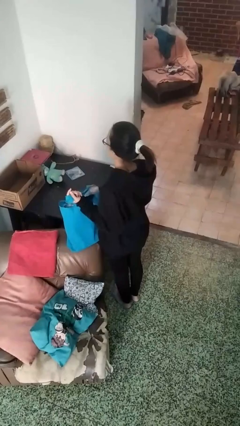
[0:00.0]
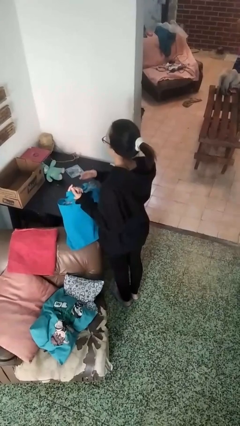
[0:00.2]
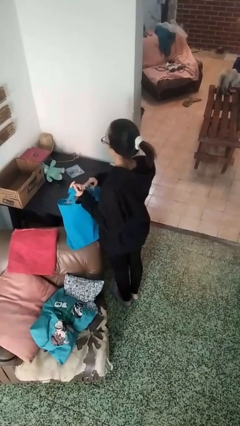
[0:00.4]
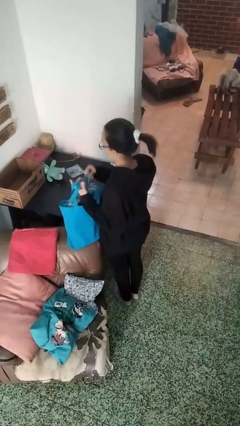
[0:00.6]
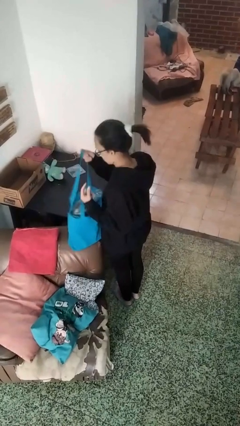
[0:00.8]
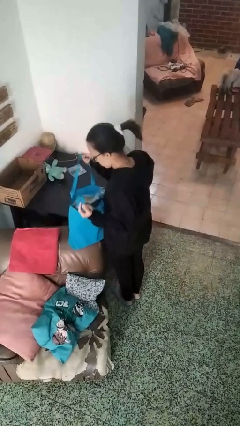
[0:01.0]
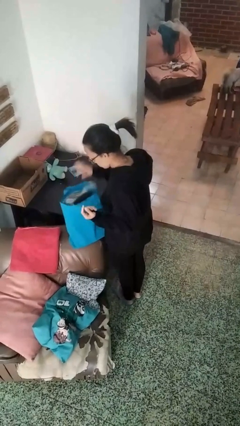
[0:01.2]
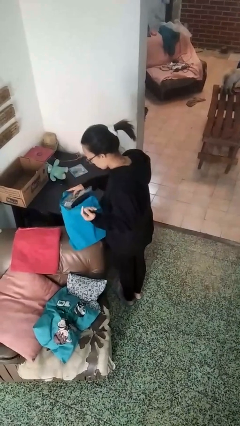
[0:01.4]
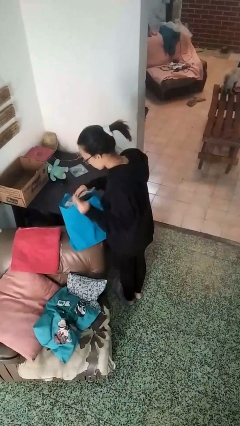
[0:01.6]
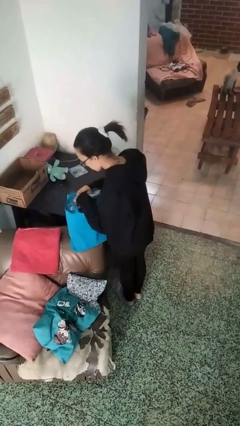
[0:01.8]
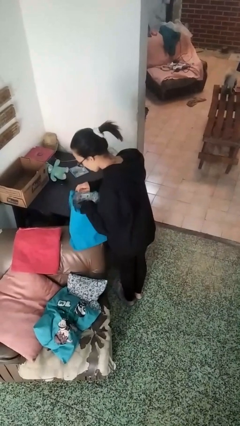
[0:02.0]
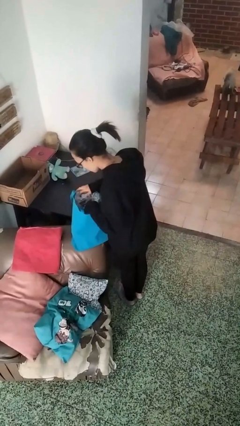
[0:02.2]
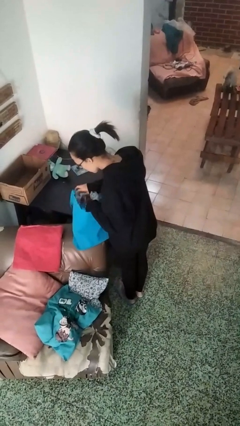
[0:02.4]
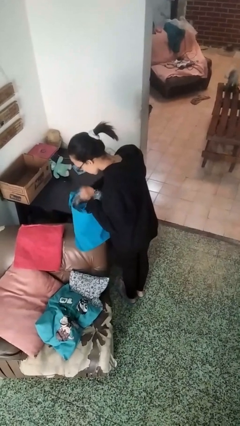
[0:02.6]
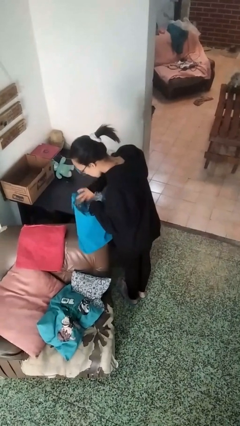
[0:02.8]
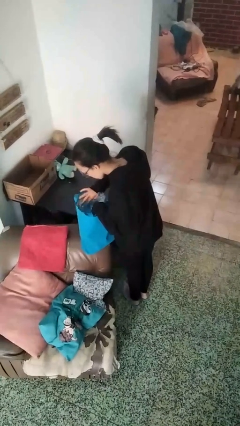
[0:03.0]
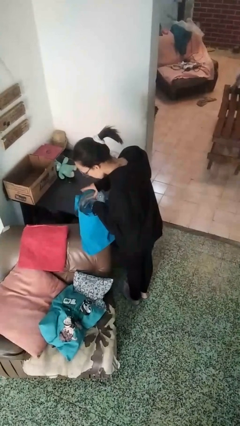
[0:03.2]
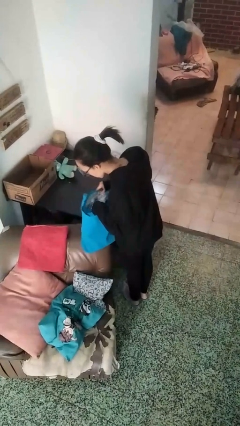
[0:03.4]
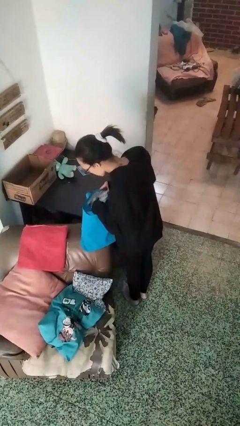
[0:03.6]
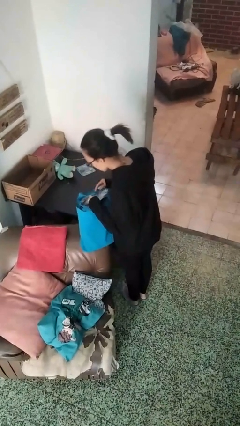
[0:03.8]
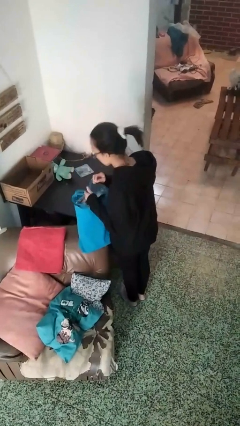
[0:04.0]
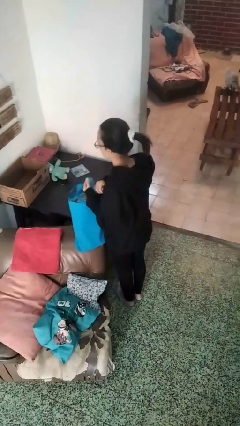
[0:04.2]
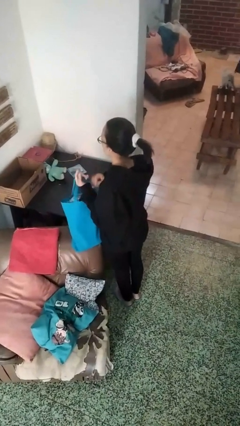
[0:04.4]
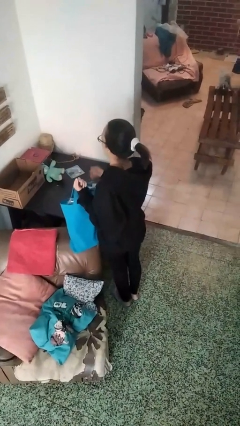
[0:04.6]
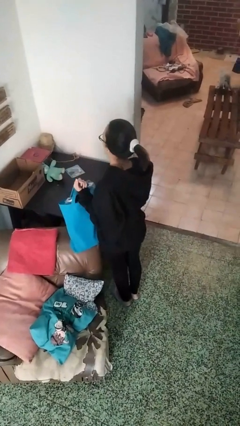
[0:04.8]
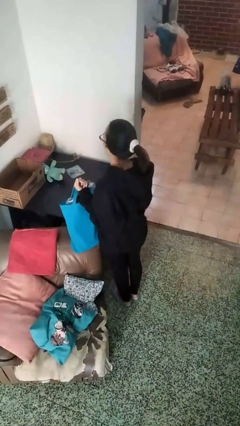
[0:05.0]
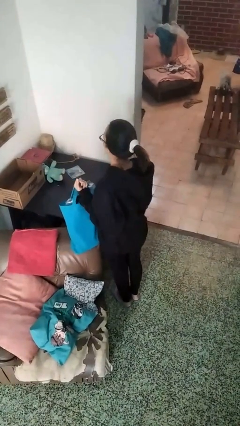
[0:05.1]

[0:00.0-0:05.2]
person searches in bag

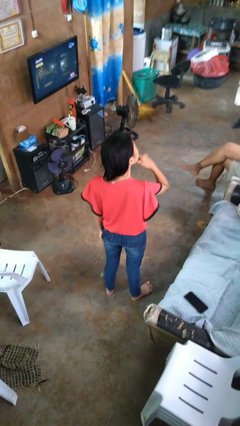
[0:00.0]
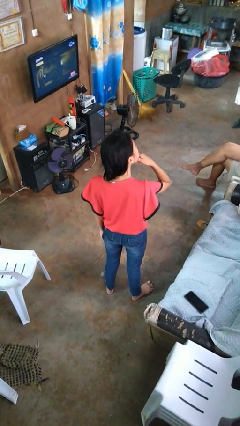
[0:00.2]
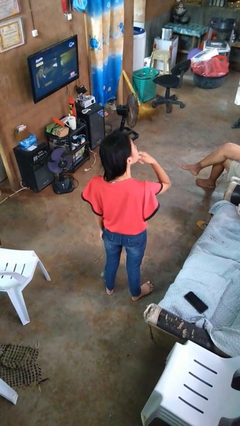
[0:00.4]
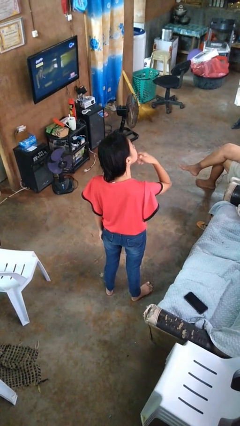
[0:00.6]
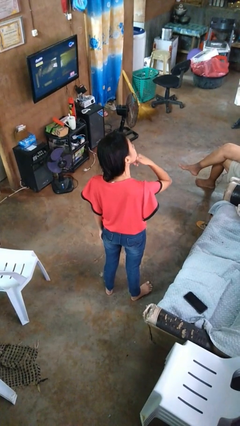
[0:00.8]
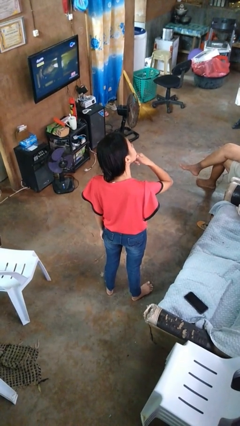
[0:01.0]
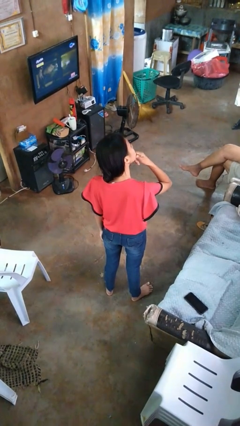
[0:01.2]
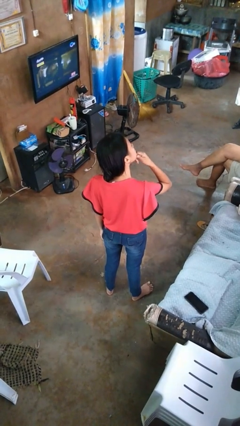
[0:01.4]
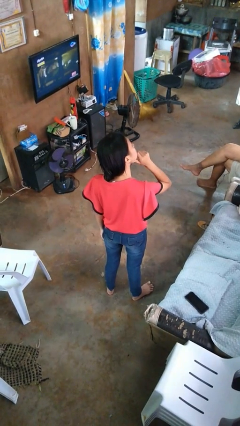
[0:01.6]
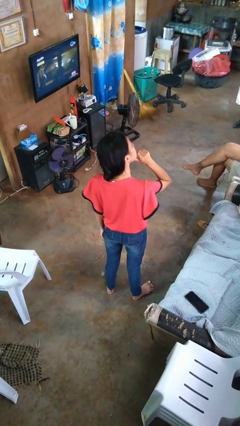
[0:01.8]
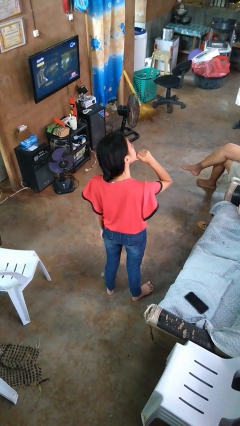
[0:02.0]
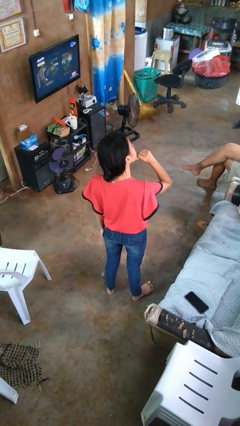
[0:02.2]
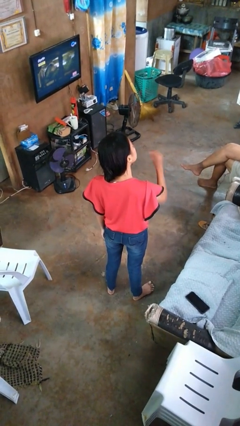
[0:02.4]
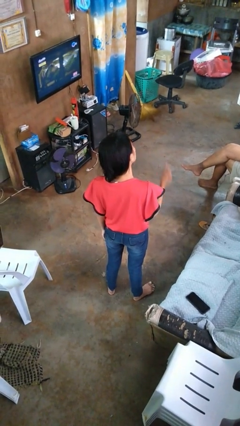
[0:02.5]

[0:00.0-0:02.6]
person strokes chin

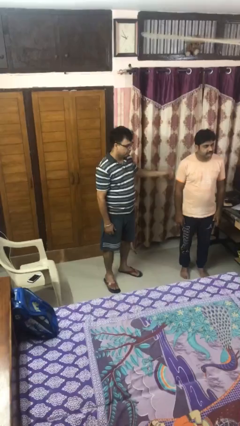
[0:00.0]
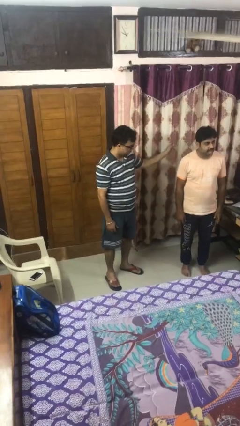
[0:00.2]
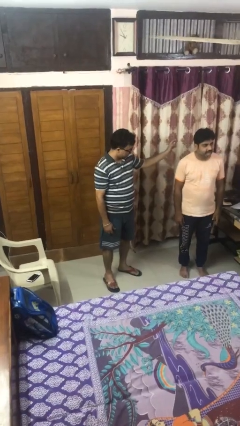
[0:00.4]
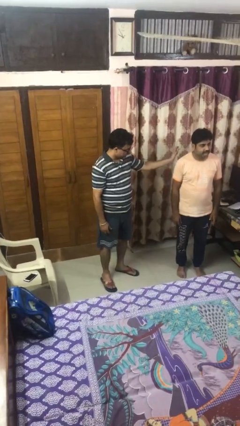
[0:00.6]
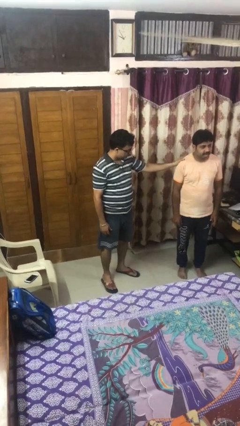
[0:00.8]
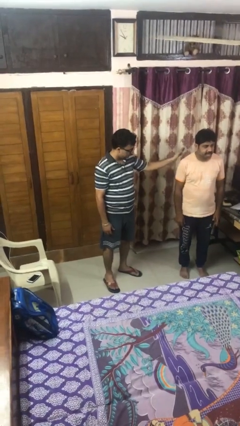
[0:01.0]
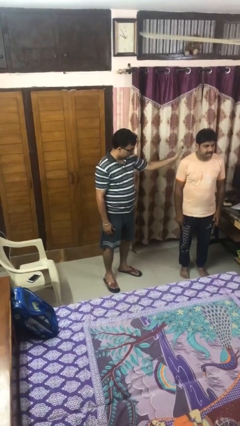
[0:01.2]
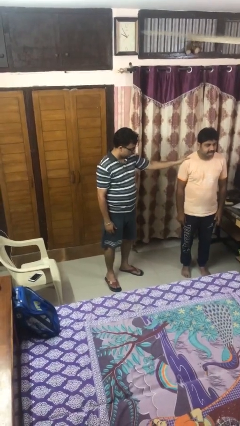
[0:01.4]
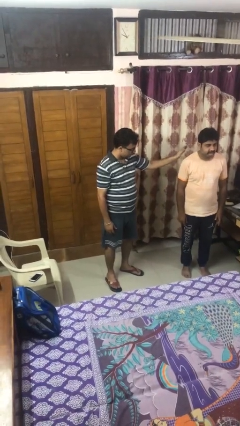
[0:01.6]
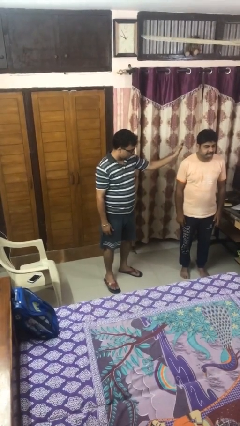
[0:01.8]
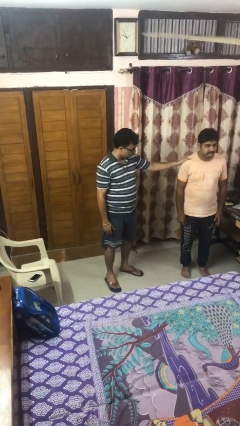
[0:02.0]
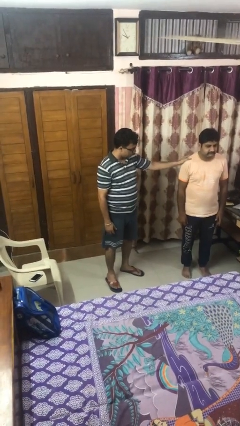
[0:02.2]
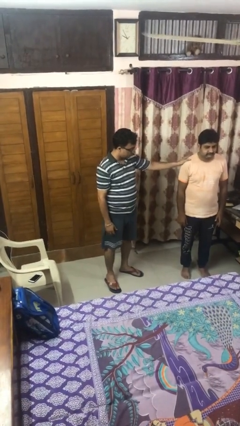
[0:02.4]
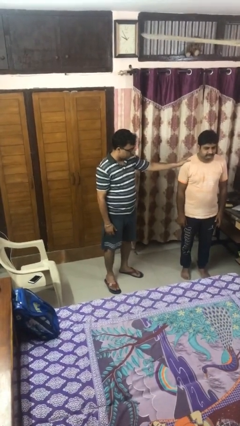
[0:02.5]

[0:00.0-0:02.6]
person pounds shoulders of person

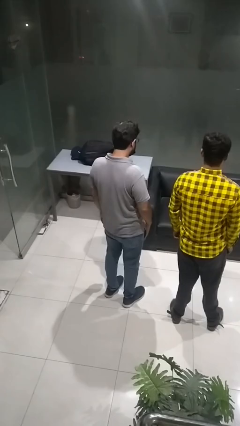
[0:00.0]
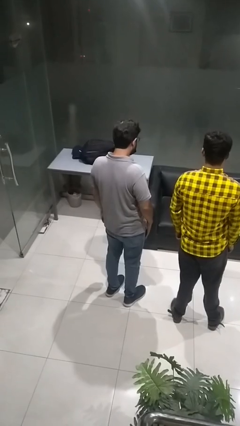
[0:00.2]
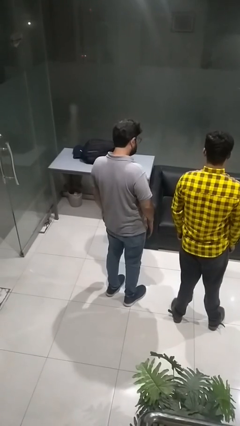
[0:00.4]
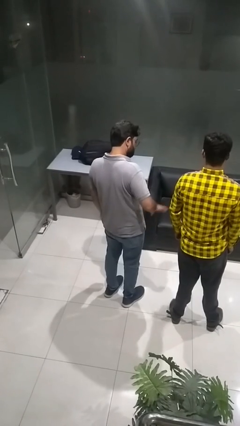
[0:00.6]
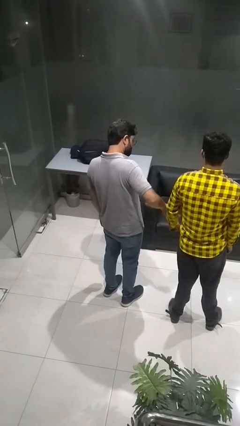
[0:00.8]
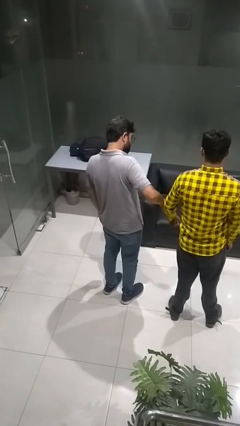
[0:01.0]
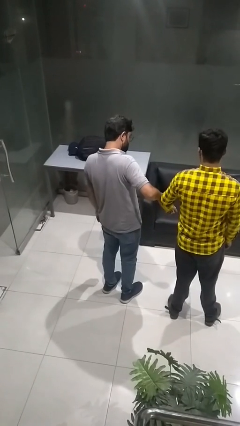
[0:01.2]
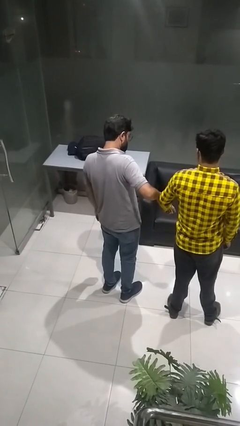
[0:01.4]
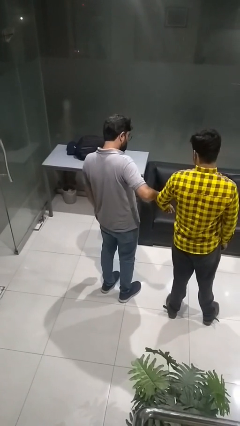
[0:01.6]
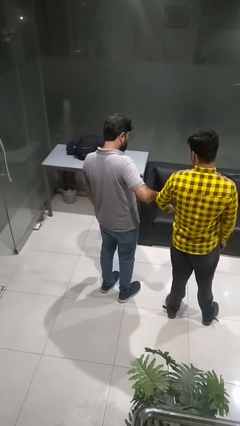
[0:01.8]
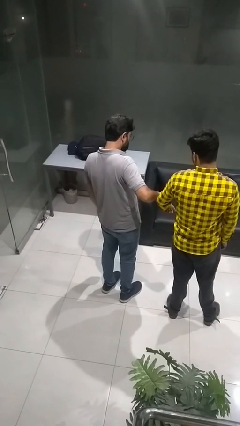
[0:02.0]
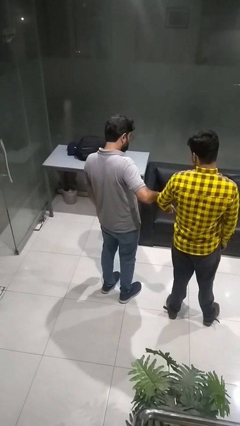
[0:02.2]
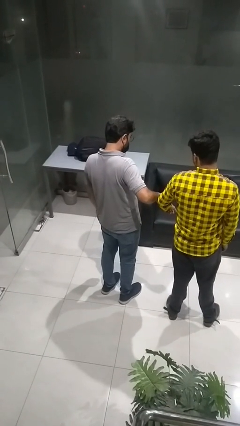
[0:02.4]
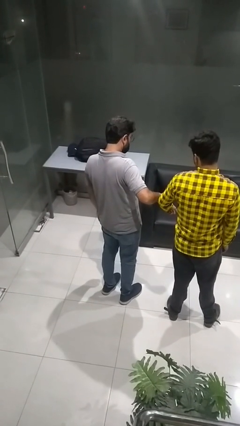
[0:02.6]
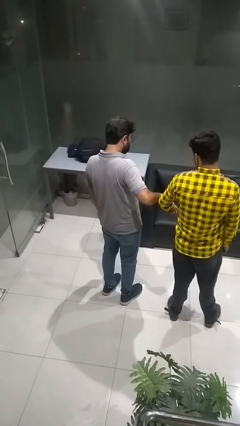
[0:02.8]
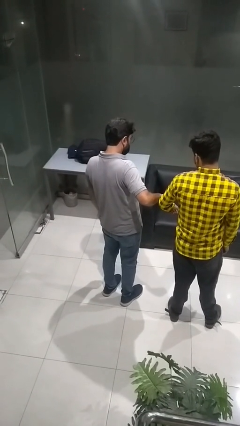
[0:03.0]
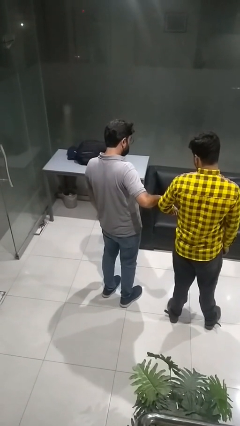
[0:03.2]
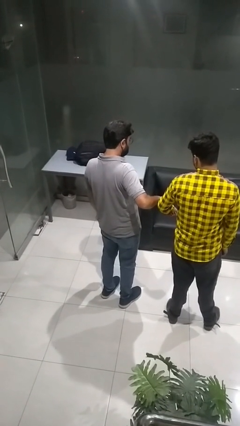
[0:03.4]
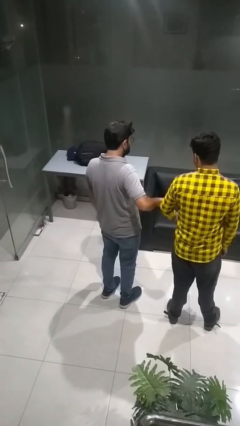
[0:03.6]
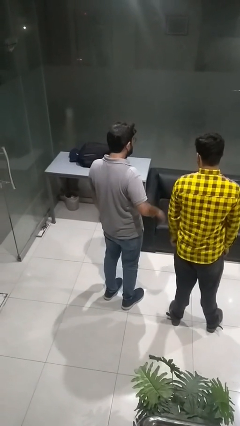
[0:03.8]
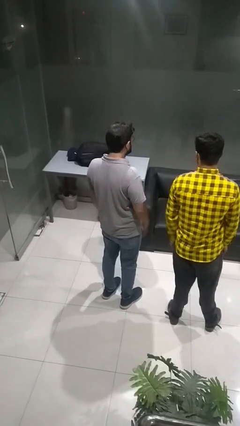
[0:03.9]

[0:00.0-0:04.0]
person grabs person by forearm

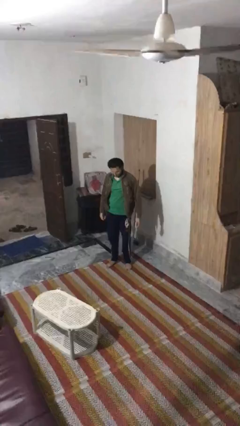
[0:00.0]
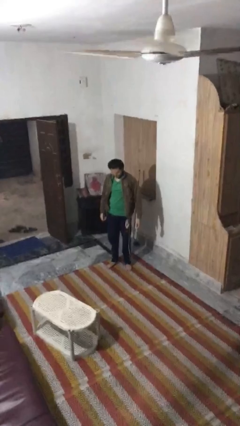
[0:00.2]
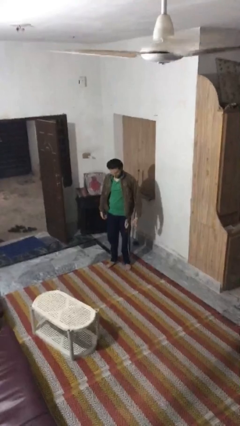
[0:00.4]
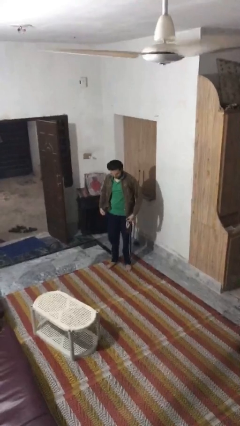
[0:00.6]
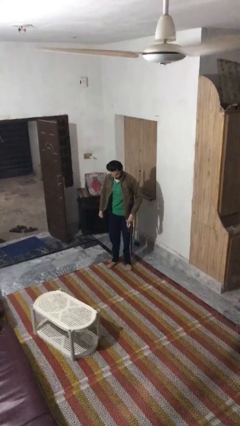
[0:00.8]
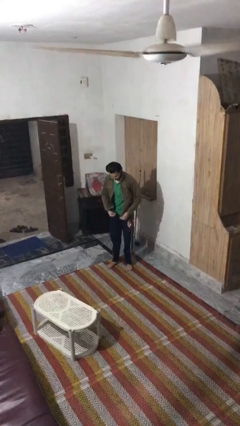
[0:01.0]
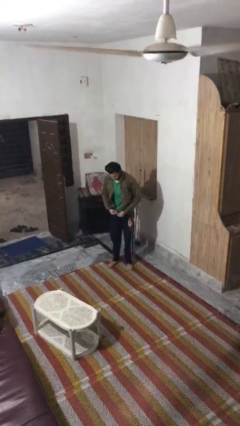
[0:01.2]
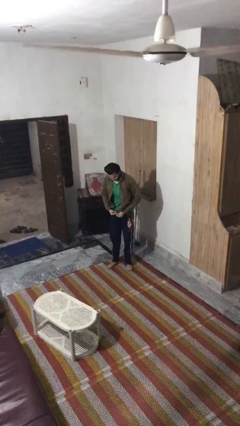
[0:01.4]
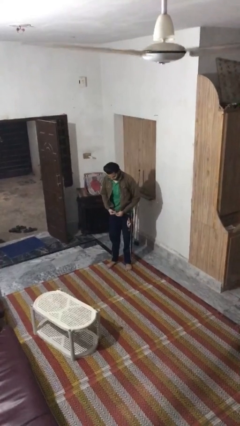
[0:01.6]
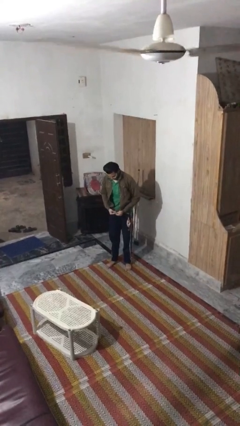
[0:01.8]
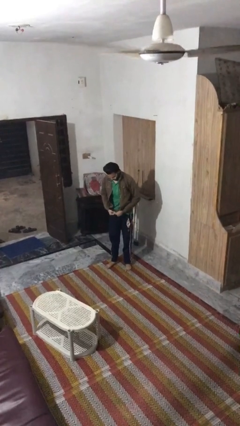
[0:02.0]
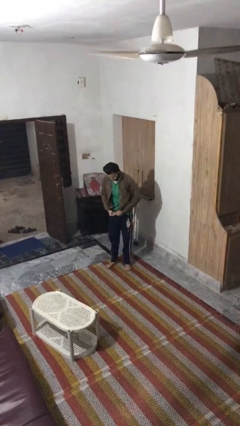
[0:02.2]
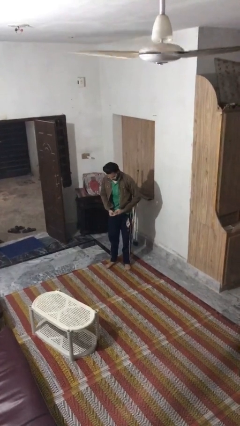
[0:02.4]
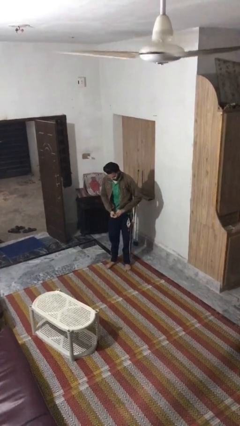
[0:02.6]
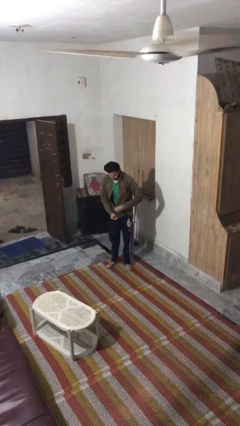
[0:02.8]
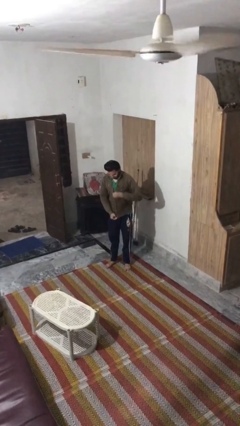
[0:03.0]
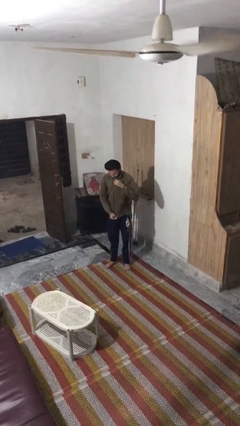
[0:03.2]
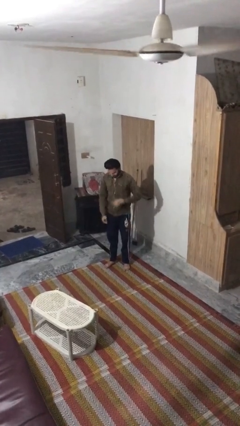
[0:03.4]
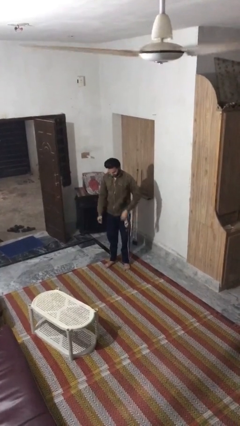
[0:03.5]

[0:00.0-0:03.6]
person zips up jacket
